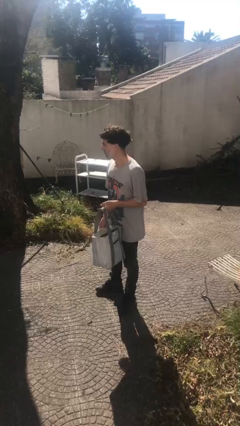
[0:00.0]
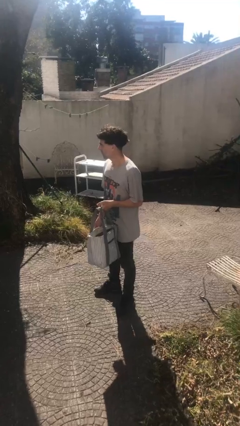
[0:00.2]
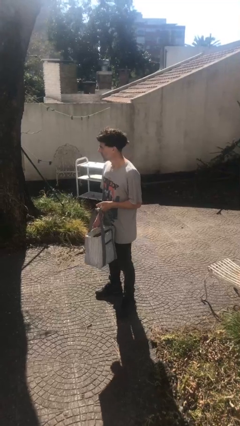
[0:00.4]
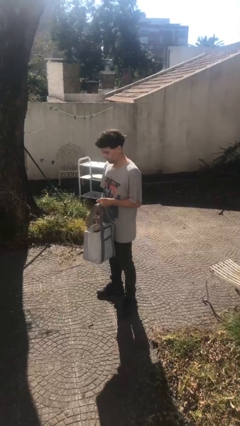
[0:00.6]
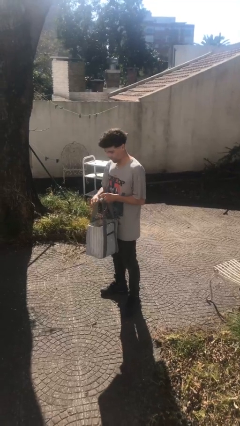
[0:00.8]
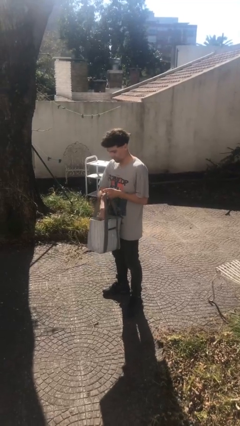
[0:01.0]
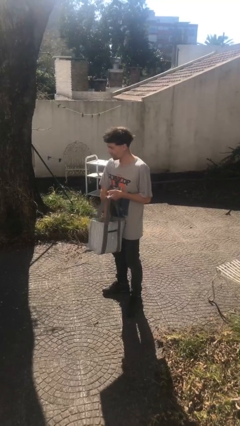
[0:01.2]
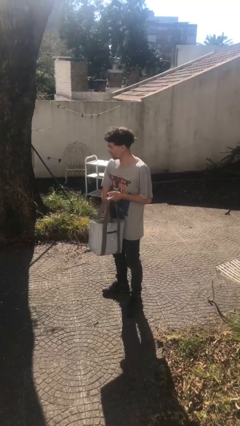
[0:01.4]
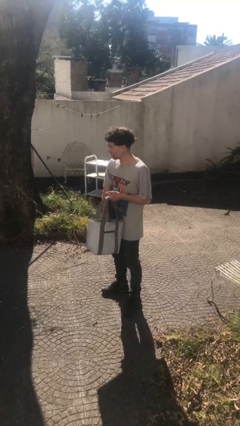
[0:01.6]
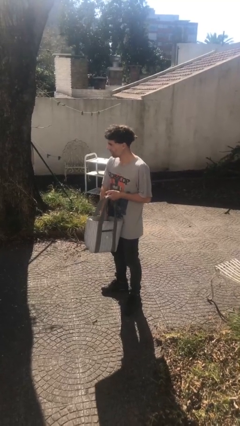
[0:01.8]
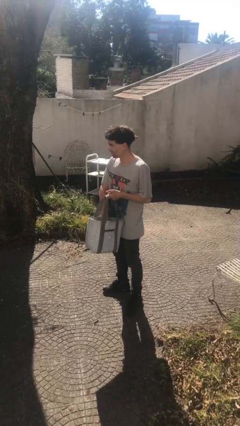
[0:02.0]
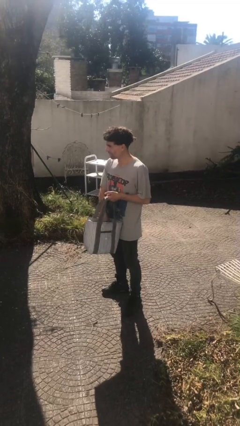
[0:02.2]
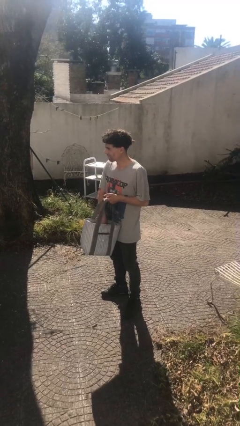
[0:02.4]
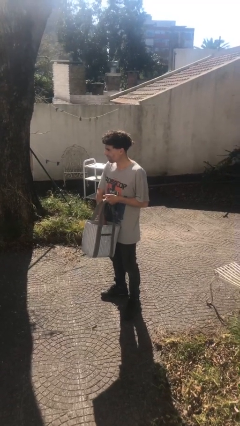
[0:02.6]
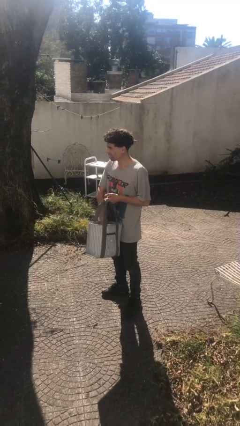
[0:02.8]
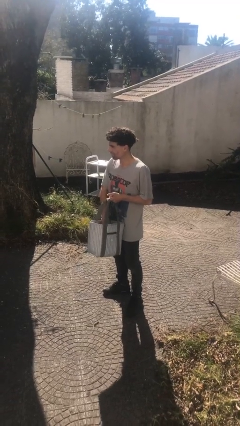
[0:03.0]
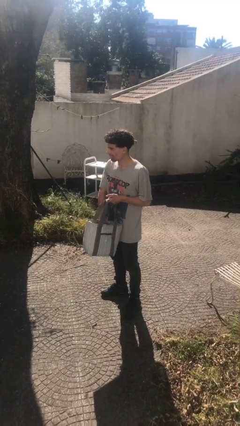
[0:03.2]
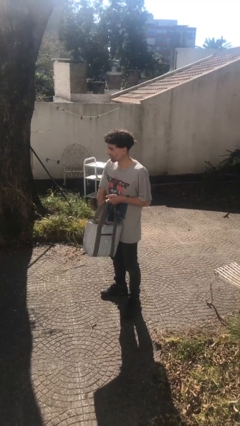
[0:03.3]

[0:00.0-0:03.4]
person searches in purse

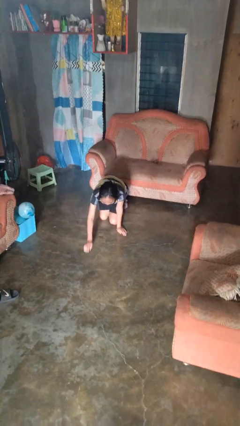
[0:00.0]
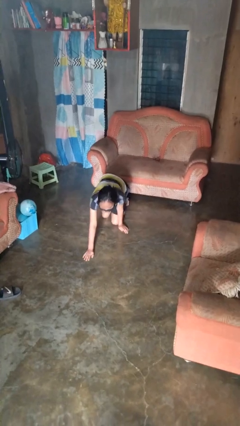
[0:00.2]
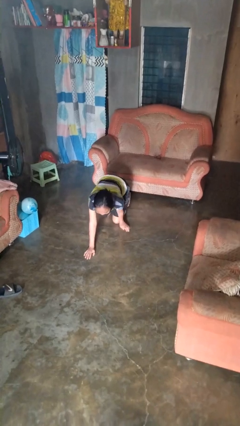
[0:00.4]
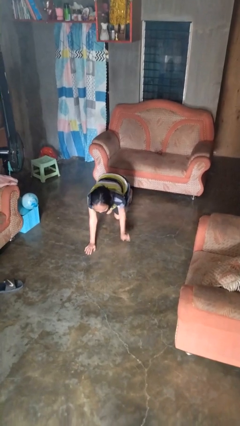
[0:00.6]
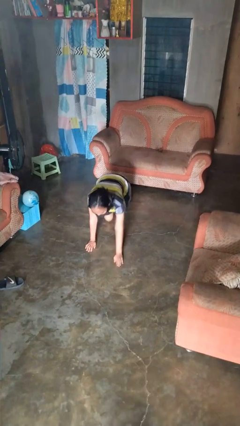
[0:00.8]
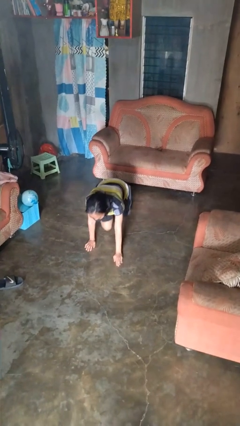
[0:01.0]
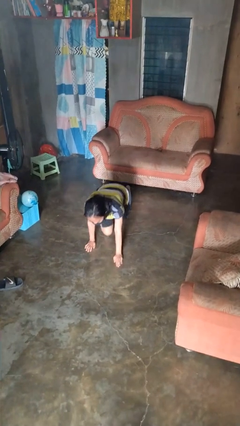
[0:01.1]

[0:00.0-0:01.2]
person crawls

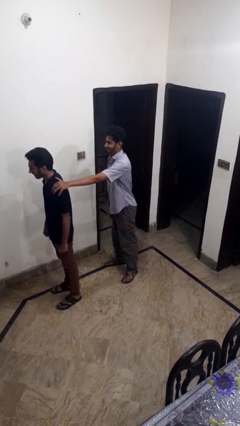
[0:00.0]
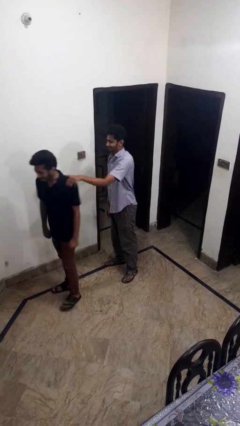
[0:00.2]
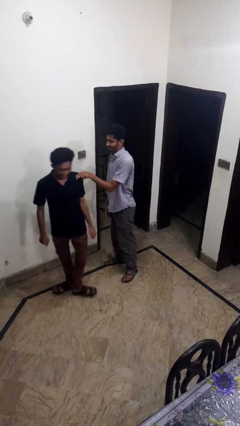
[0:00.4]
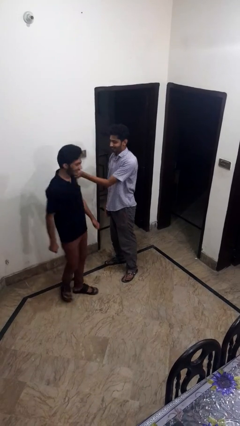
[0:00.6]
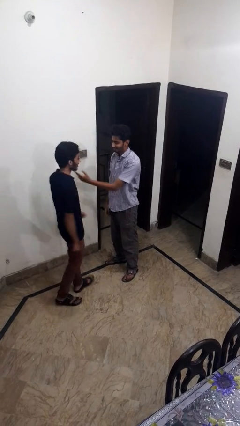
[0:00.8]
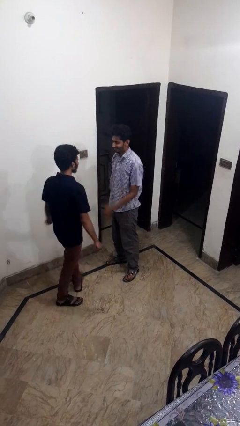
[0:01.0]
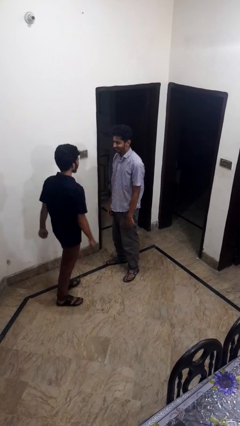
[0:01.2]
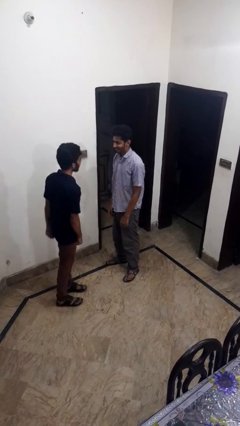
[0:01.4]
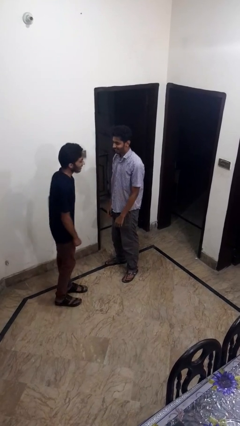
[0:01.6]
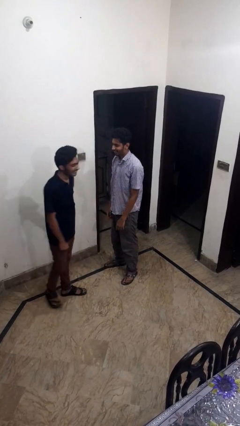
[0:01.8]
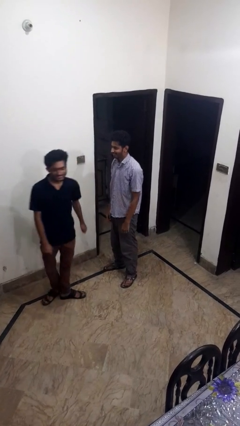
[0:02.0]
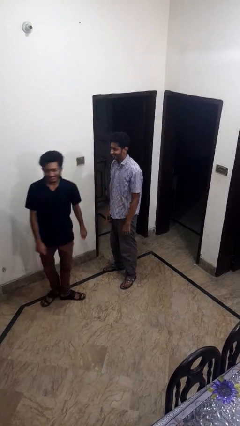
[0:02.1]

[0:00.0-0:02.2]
person spins person around

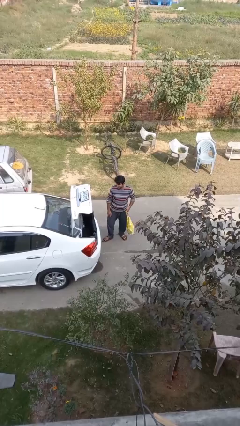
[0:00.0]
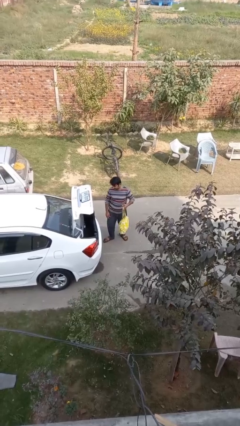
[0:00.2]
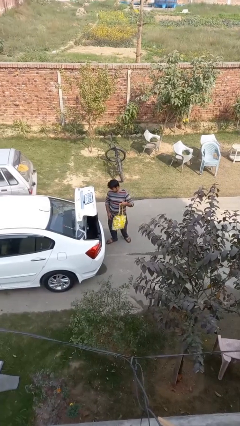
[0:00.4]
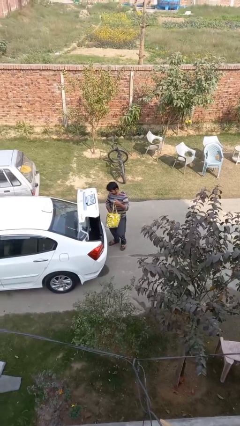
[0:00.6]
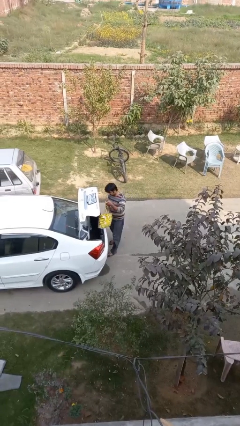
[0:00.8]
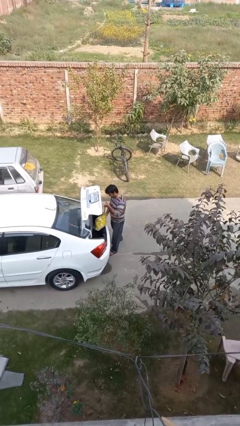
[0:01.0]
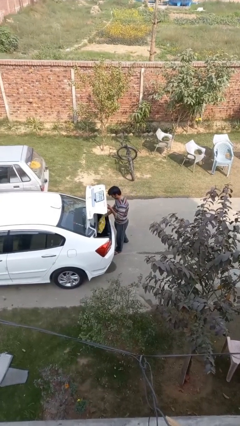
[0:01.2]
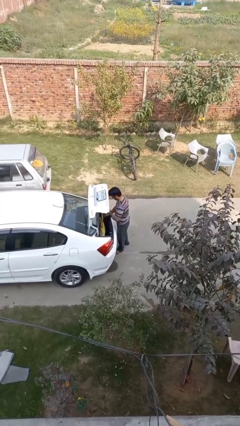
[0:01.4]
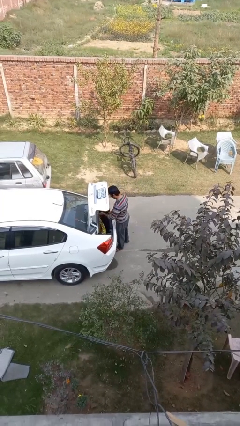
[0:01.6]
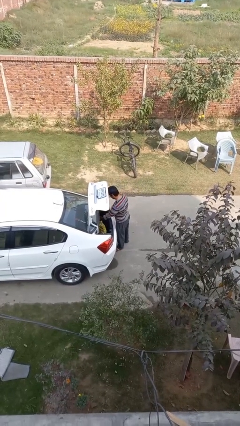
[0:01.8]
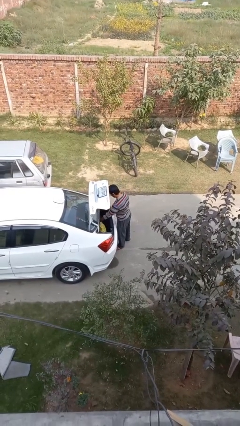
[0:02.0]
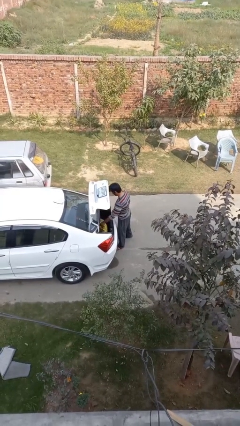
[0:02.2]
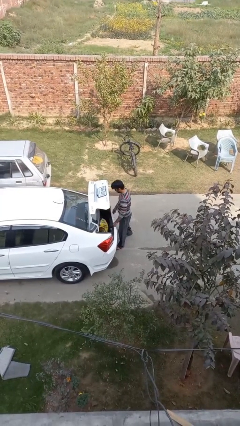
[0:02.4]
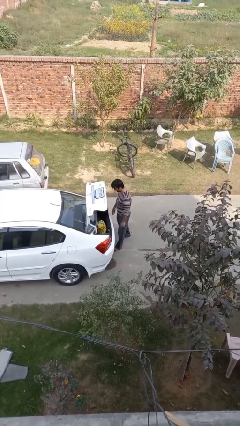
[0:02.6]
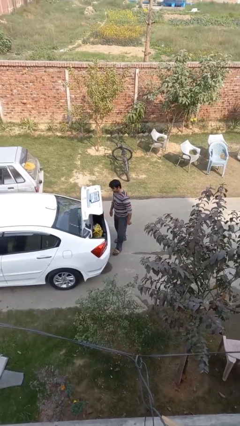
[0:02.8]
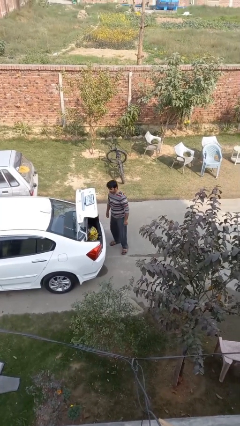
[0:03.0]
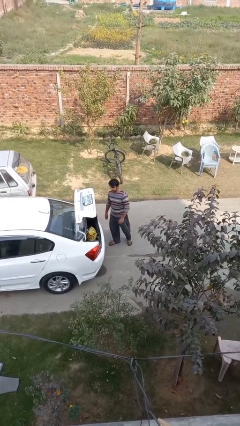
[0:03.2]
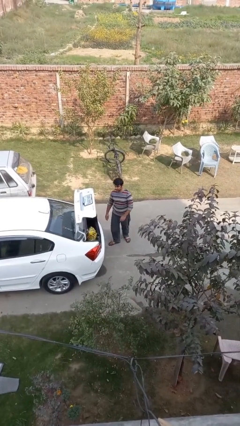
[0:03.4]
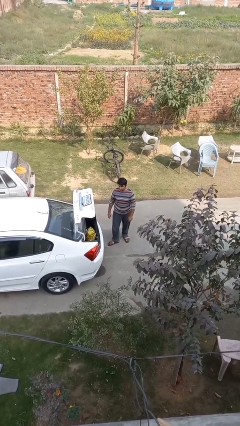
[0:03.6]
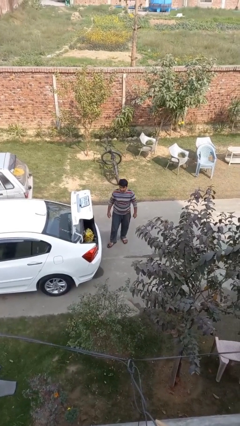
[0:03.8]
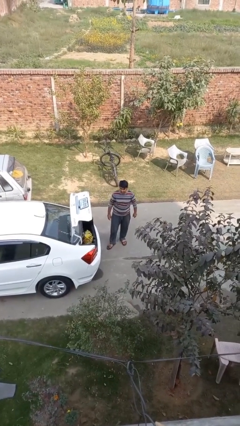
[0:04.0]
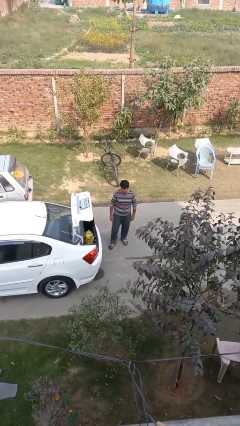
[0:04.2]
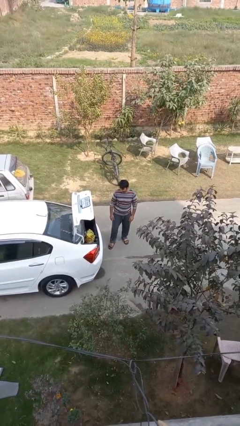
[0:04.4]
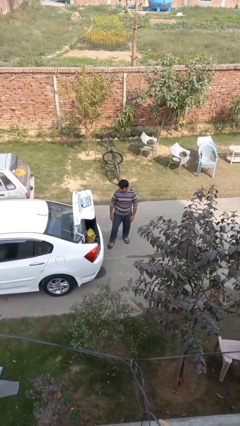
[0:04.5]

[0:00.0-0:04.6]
person loads car

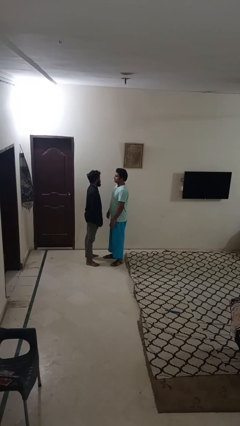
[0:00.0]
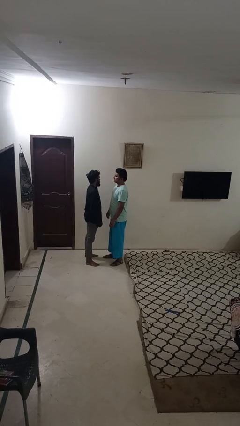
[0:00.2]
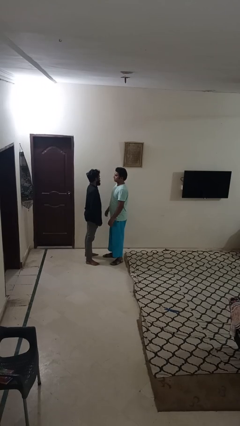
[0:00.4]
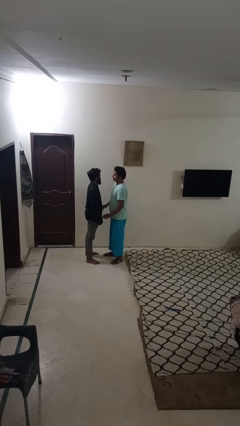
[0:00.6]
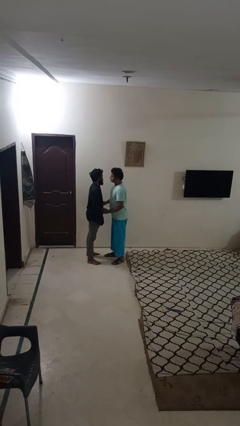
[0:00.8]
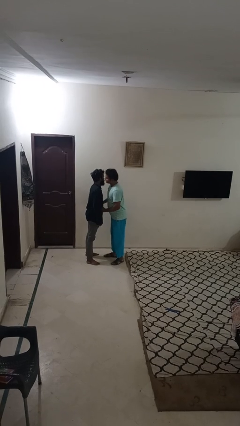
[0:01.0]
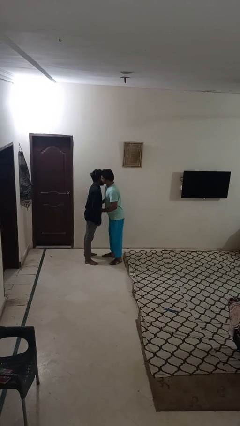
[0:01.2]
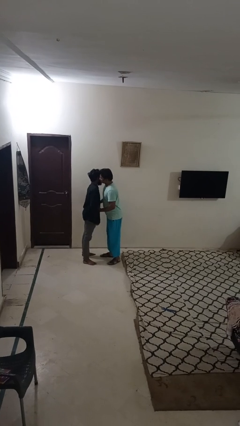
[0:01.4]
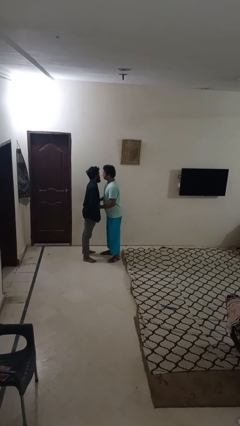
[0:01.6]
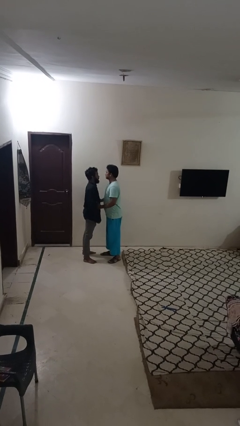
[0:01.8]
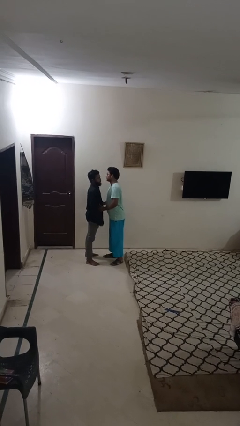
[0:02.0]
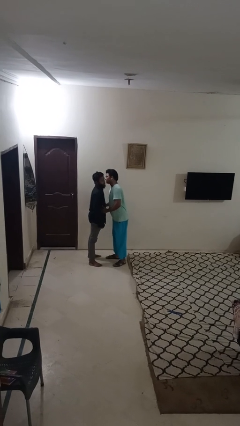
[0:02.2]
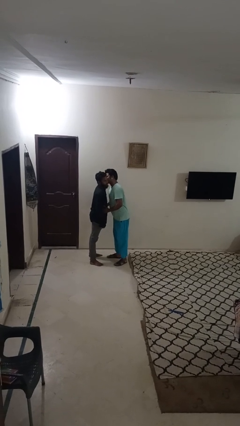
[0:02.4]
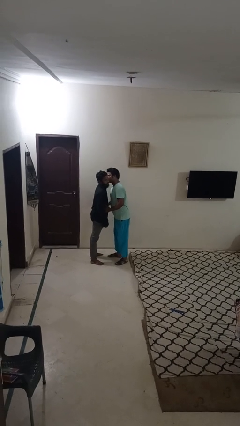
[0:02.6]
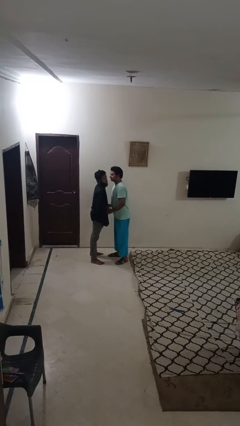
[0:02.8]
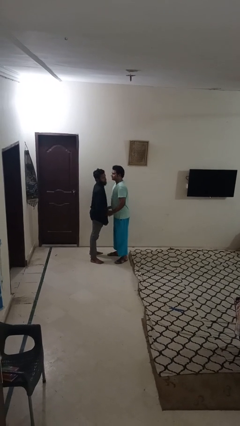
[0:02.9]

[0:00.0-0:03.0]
person kisses cheek of person

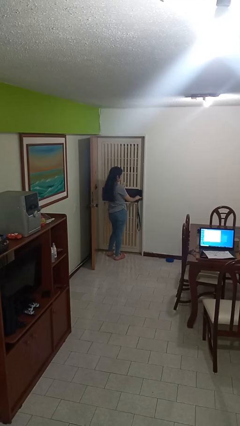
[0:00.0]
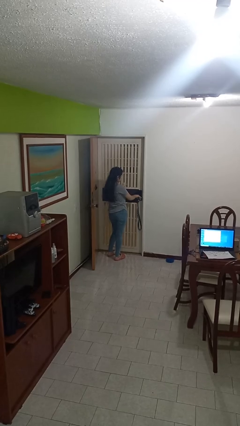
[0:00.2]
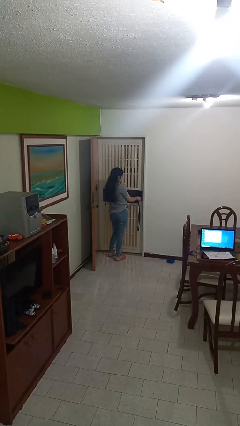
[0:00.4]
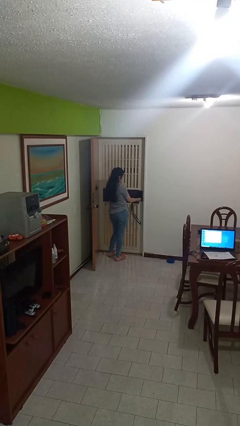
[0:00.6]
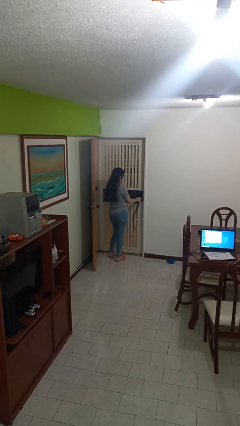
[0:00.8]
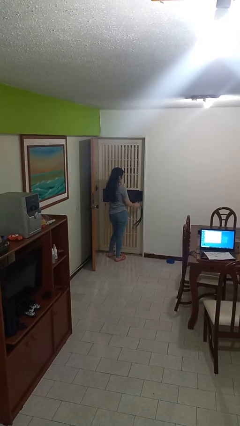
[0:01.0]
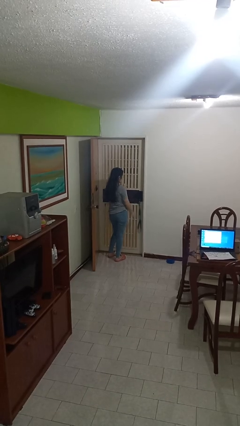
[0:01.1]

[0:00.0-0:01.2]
person locks door with keys

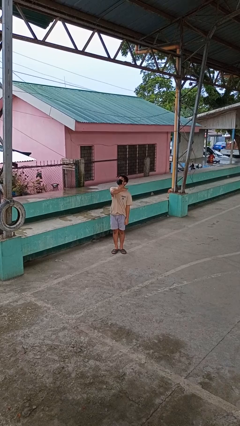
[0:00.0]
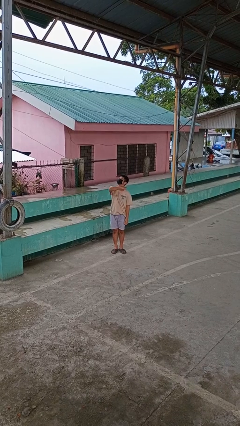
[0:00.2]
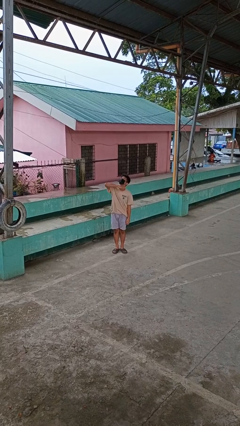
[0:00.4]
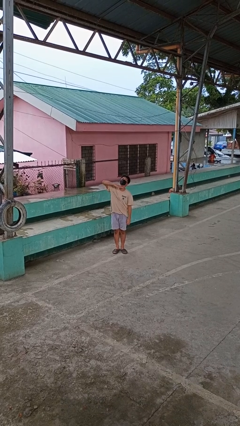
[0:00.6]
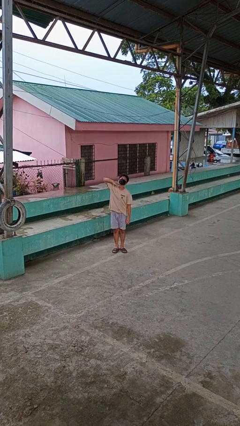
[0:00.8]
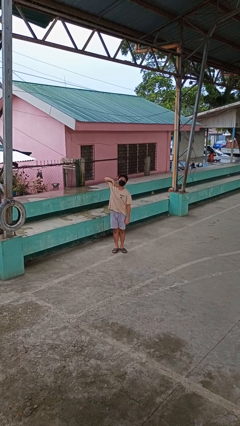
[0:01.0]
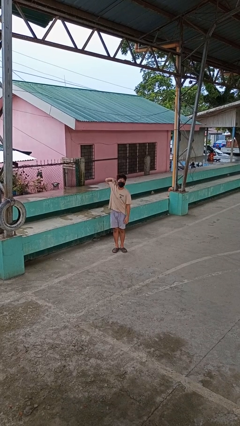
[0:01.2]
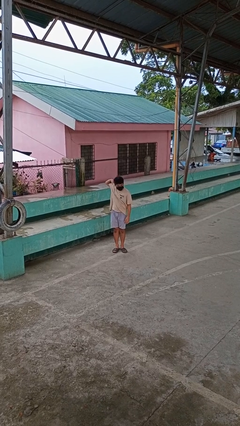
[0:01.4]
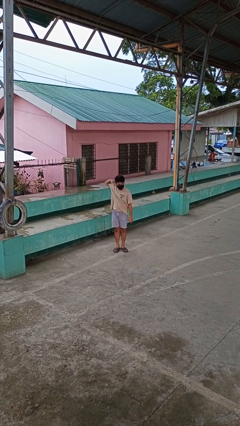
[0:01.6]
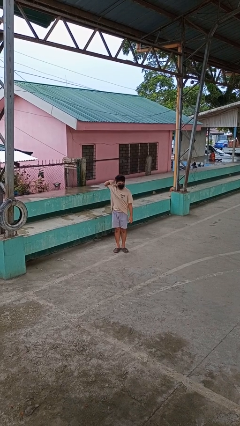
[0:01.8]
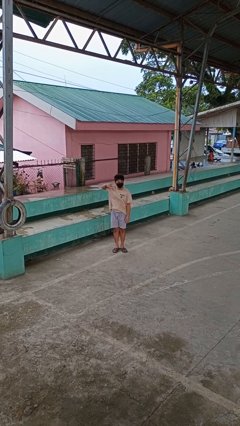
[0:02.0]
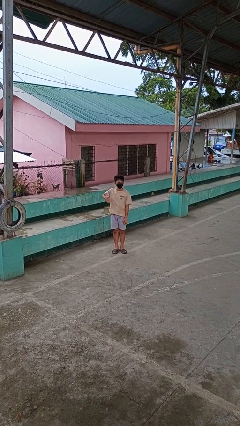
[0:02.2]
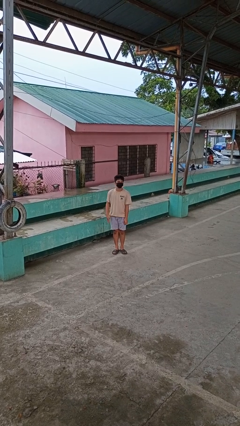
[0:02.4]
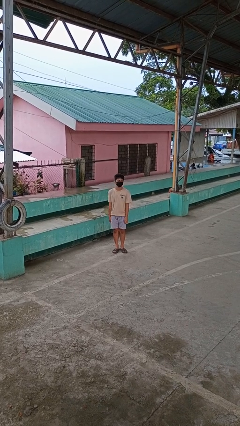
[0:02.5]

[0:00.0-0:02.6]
person gestures cut
